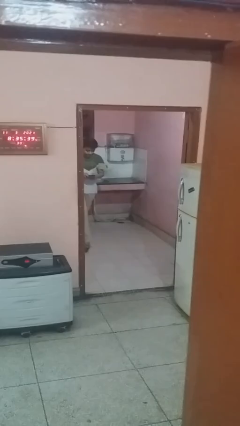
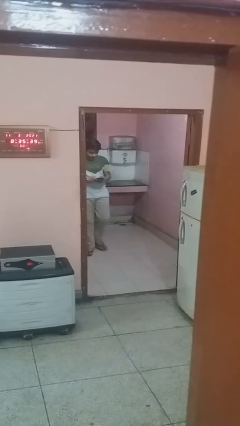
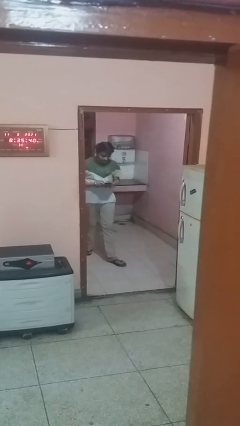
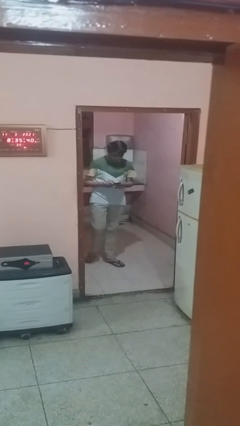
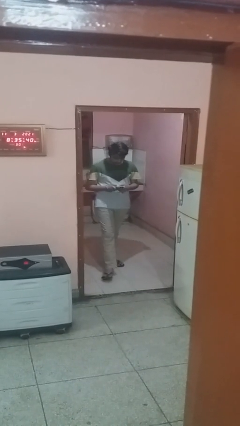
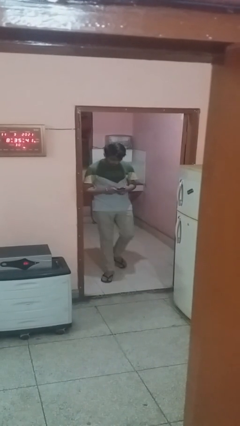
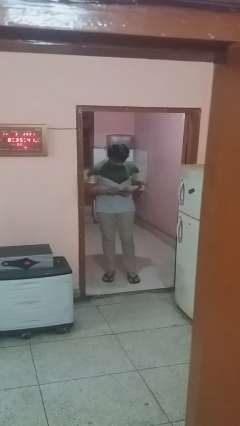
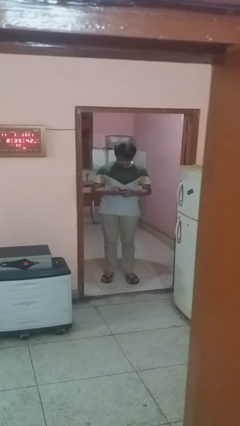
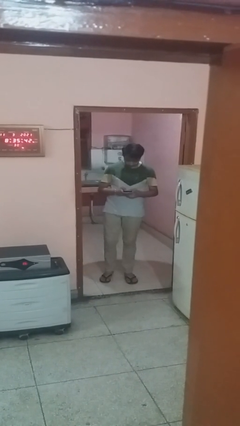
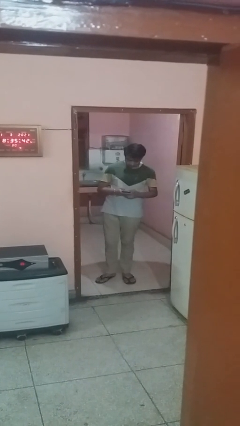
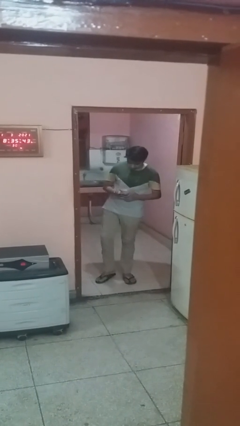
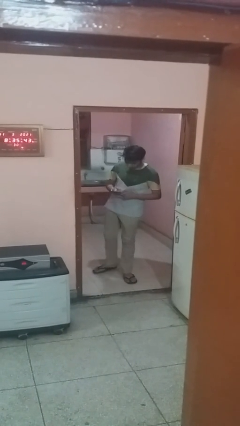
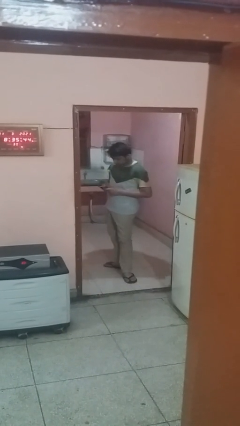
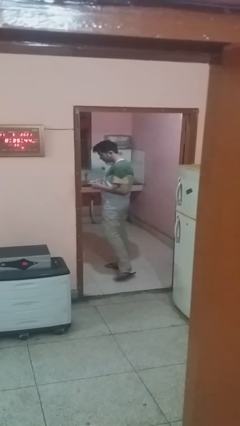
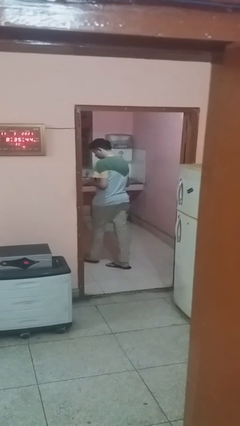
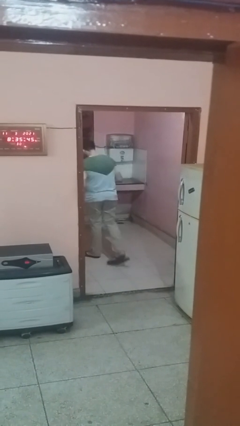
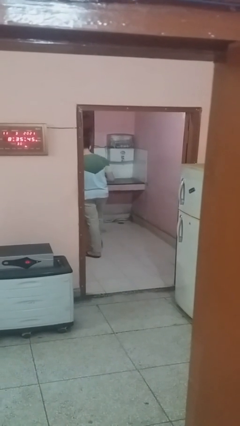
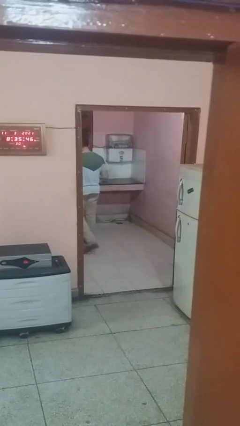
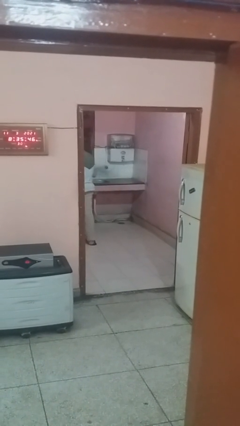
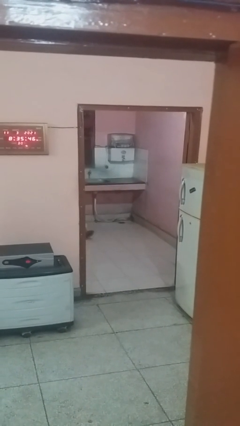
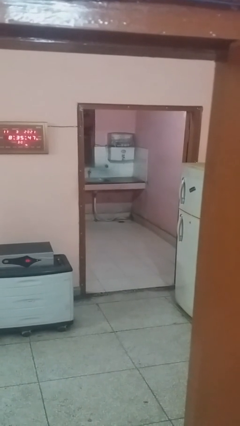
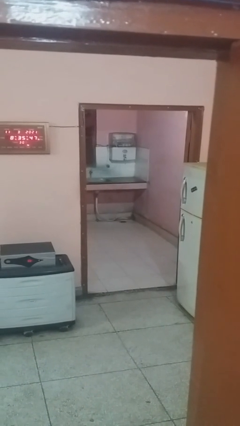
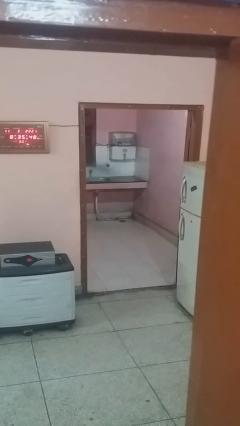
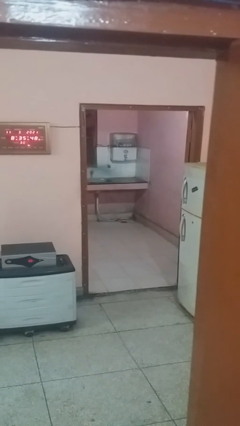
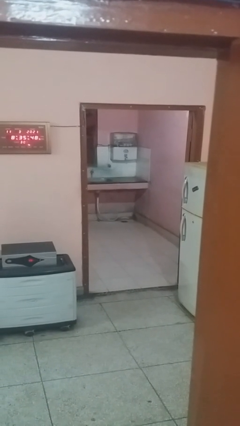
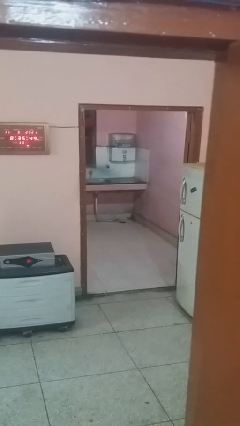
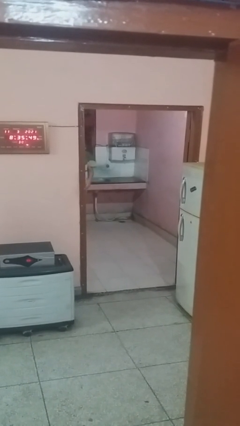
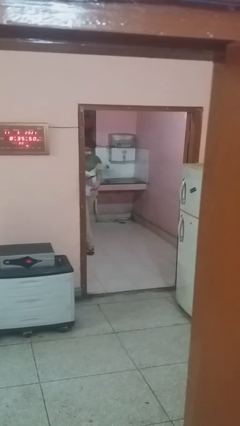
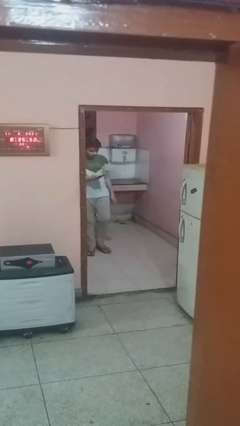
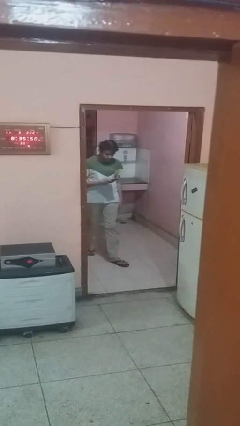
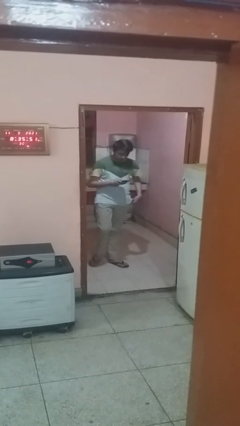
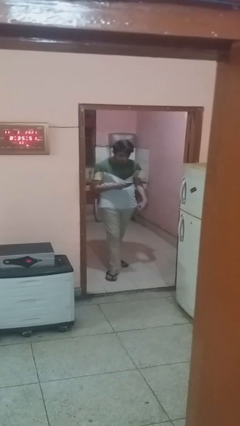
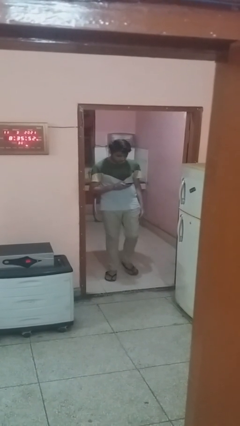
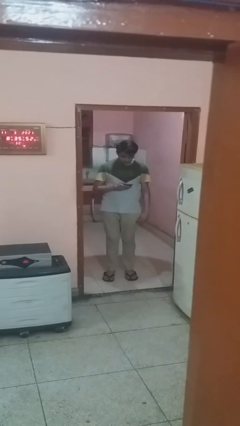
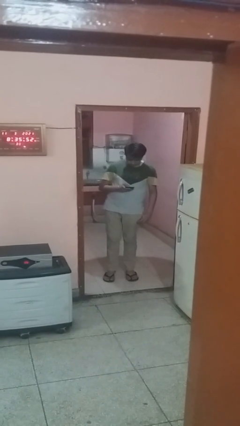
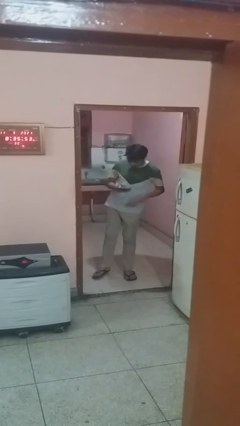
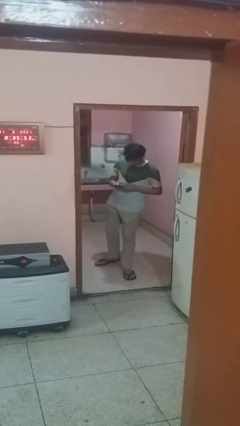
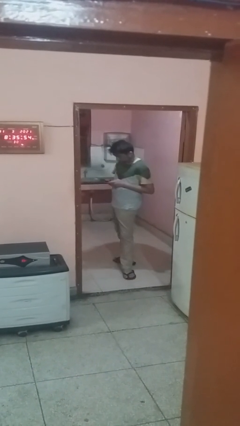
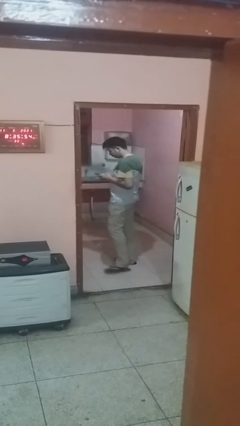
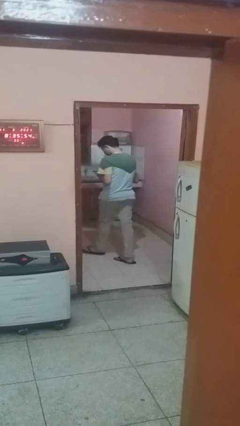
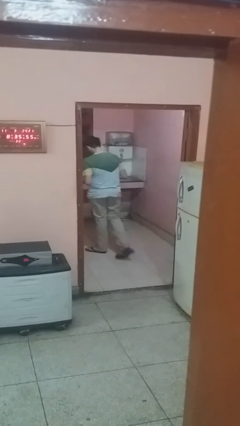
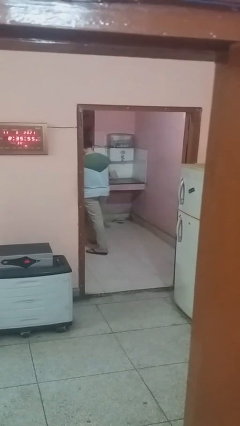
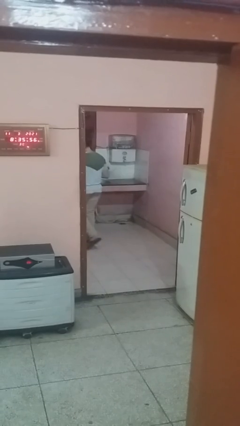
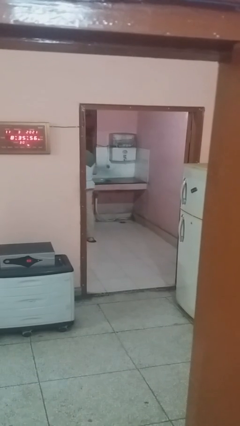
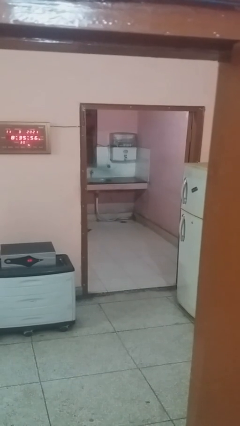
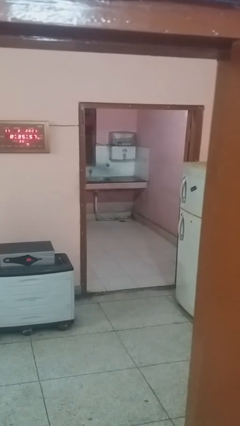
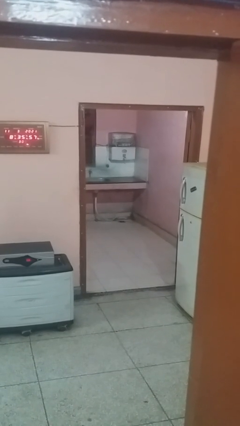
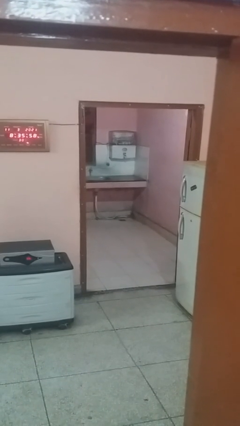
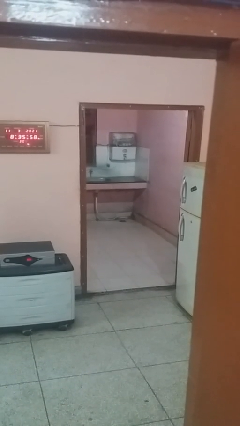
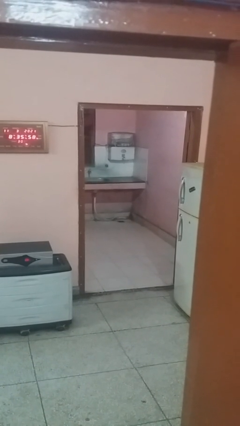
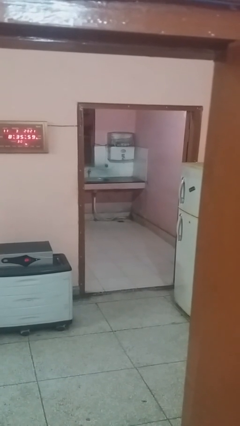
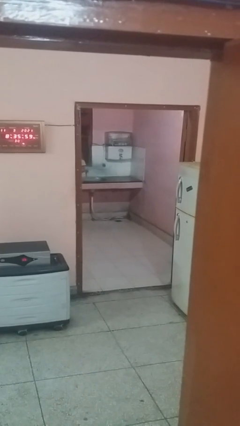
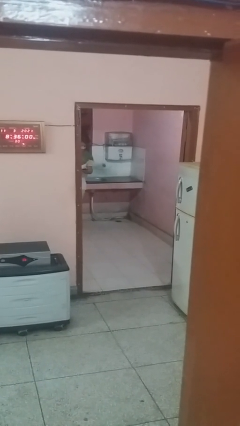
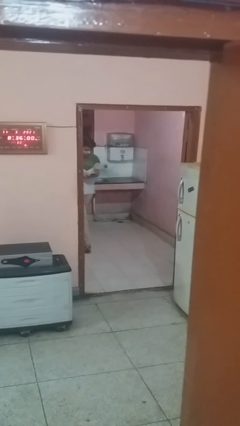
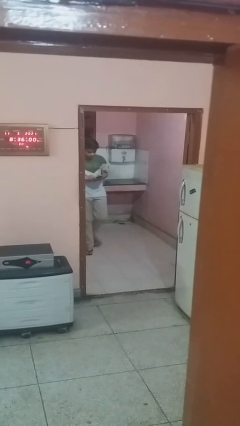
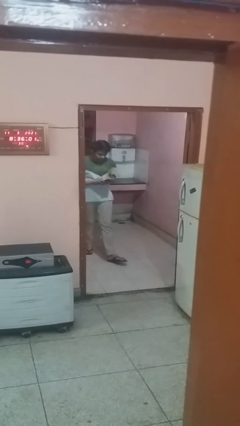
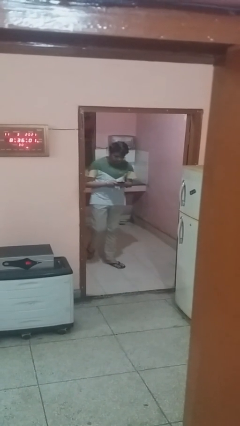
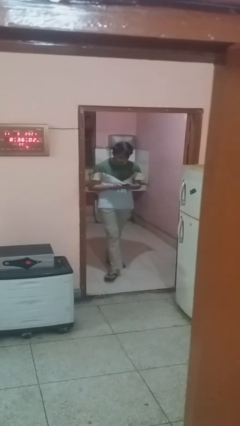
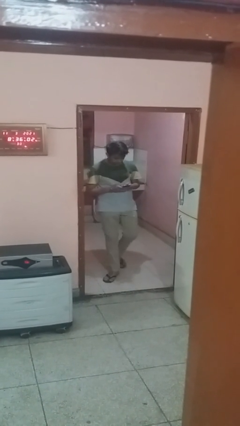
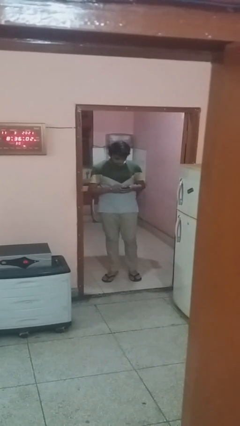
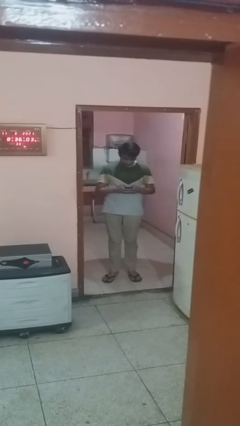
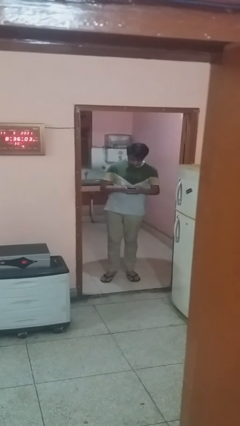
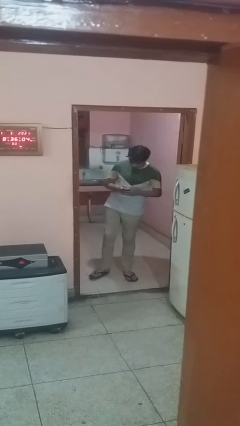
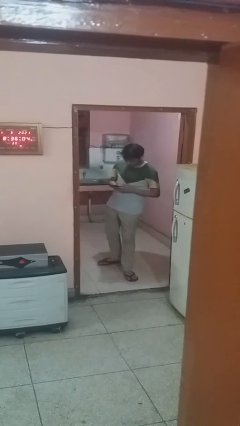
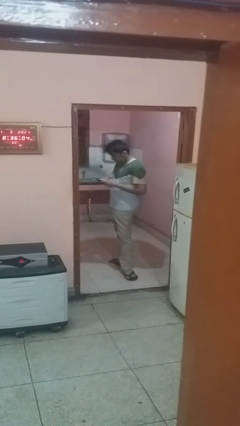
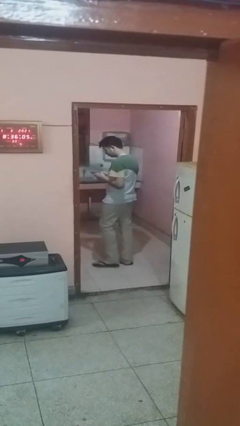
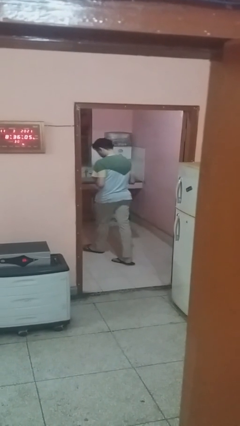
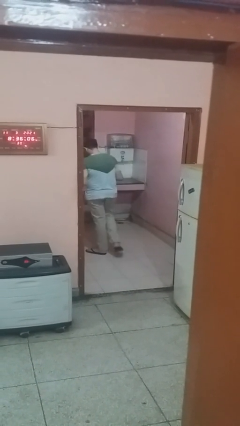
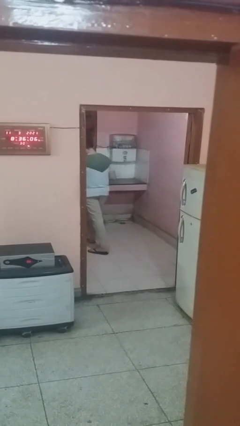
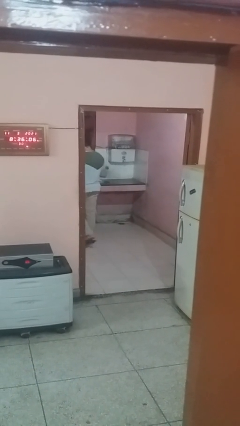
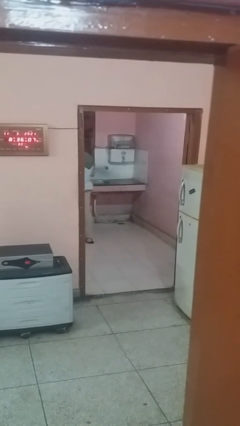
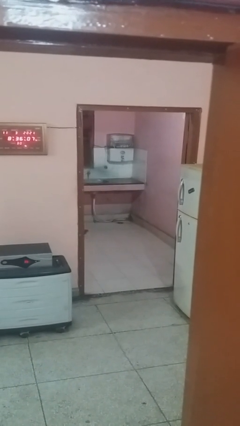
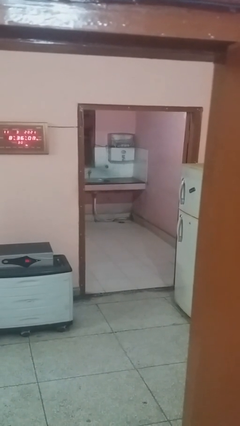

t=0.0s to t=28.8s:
person texts on phone

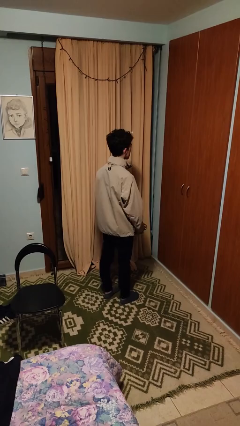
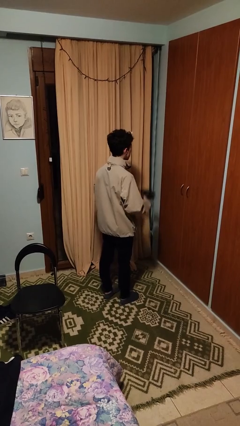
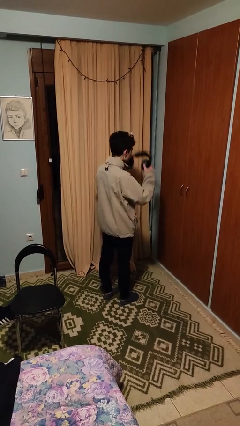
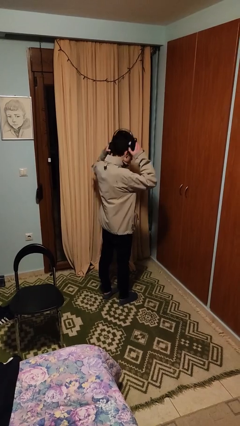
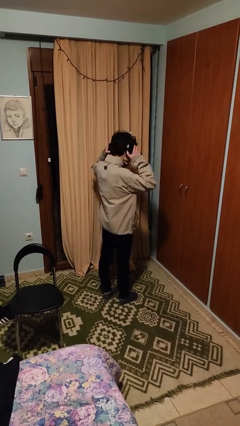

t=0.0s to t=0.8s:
person puts on headphones

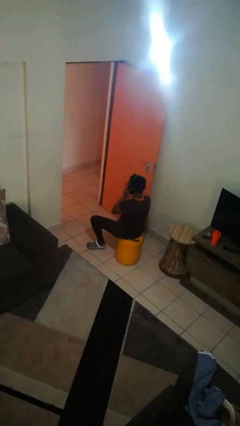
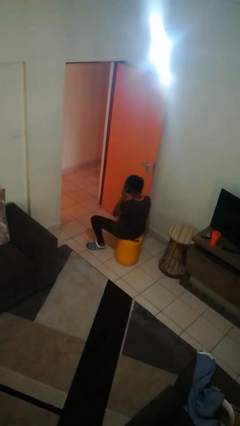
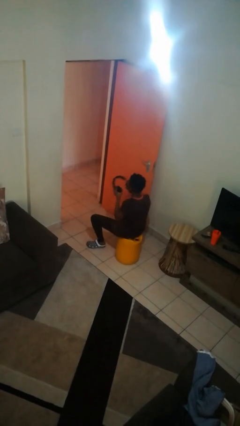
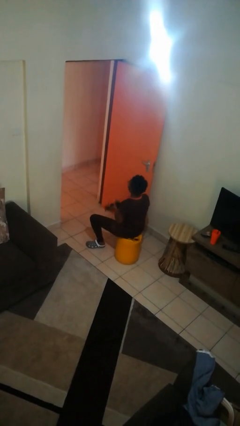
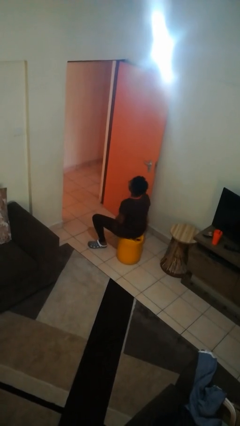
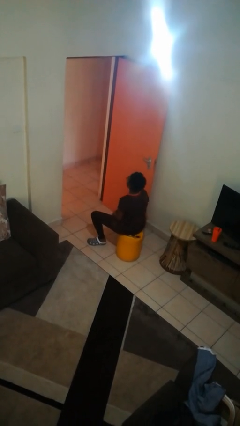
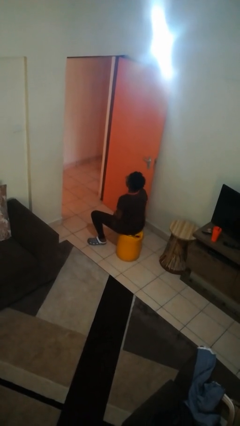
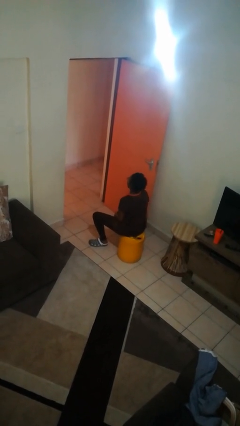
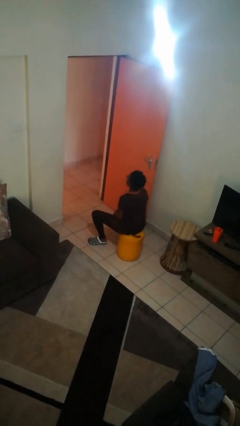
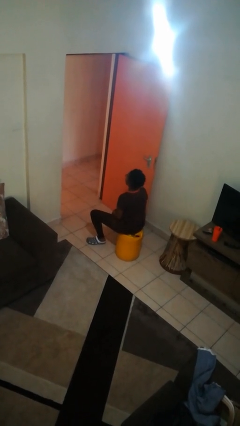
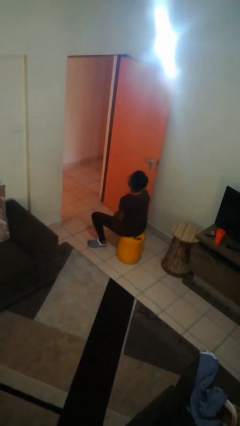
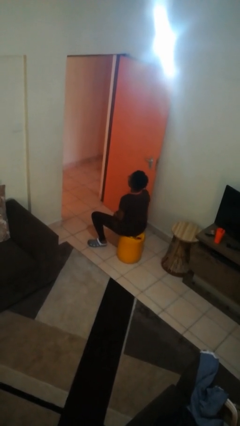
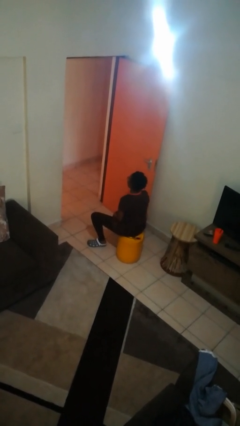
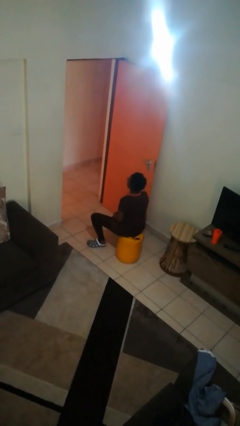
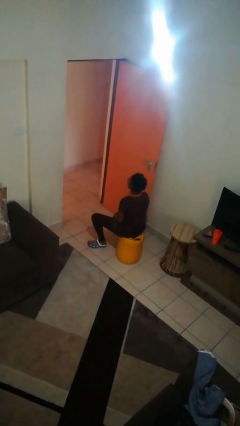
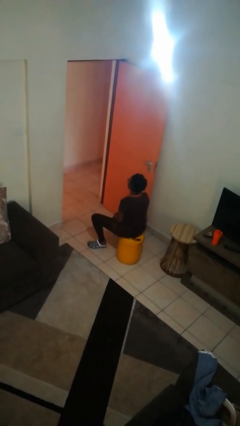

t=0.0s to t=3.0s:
person takes off headphones
